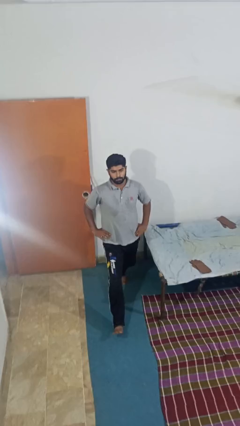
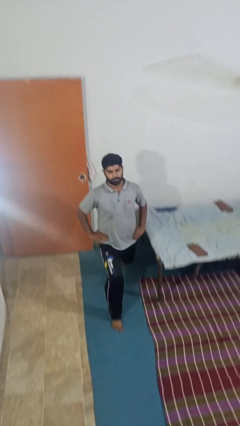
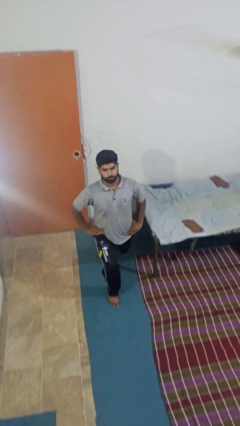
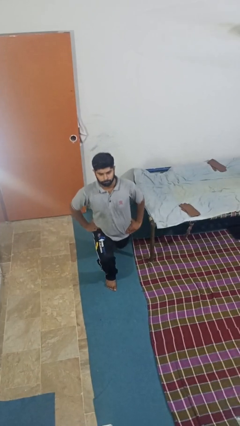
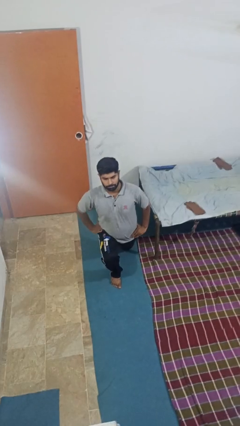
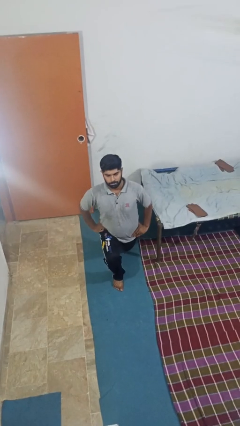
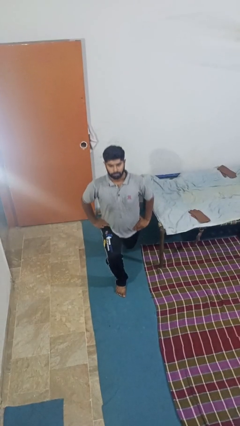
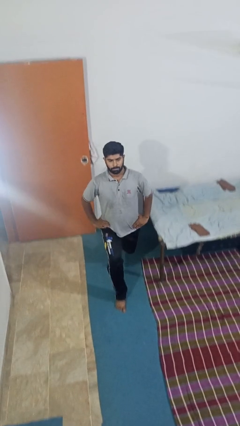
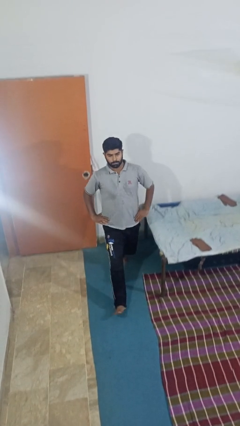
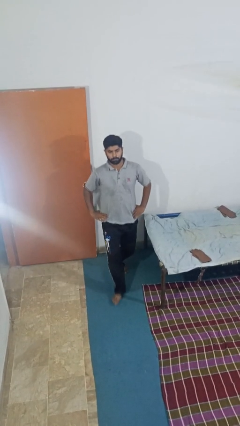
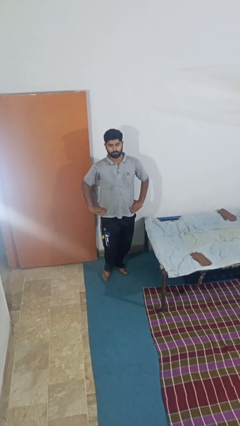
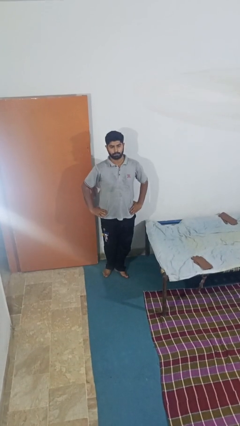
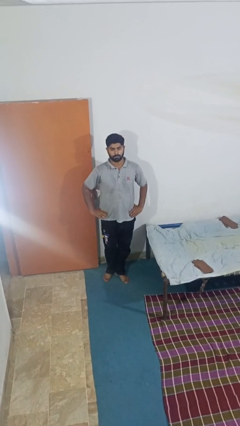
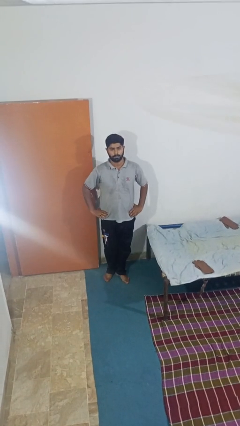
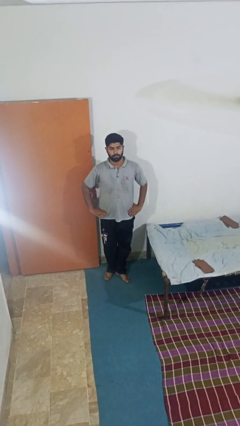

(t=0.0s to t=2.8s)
person exercises with lunges

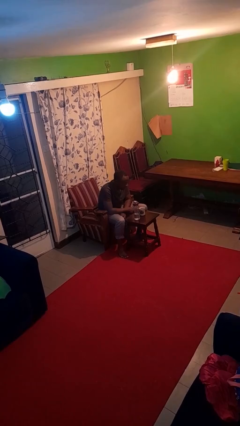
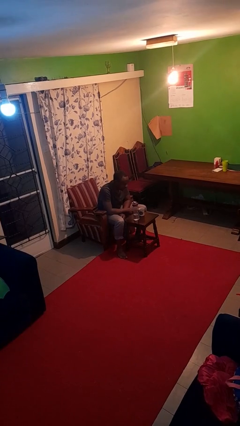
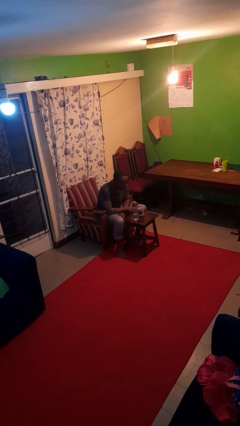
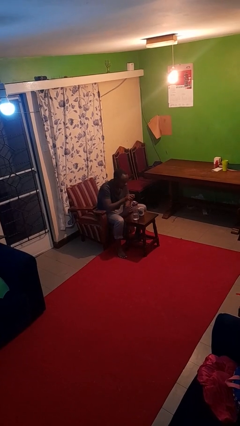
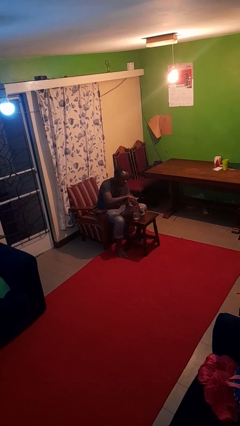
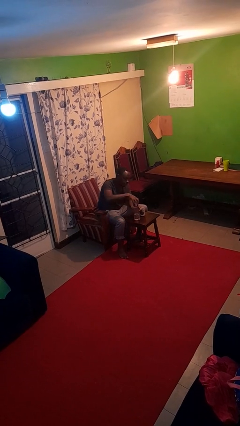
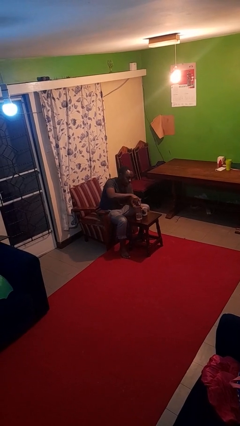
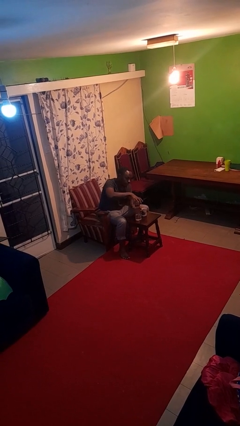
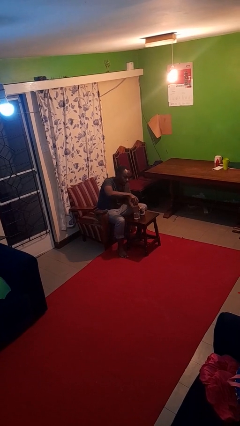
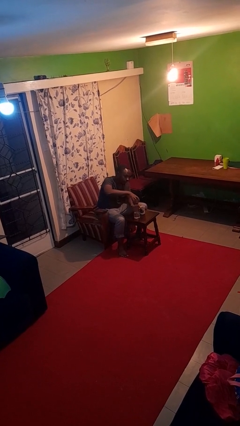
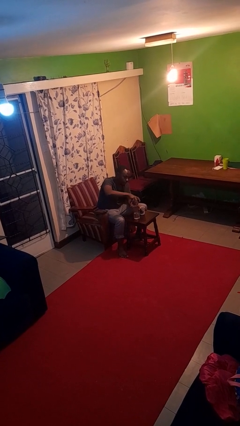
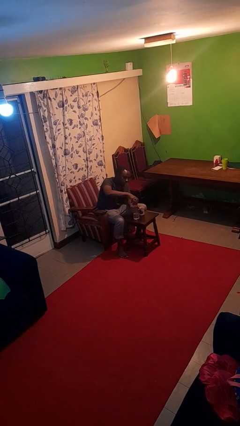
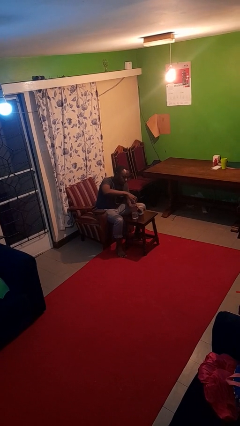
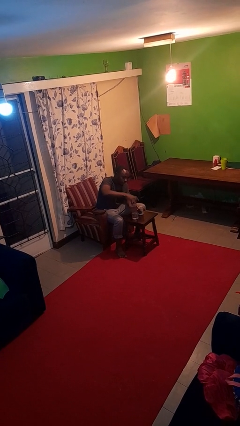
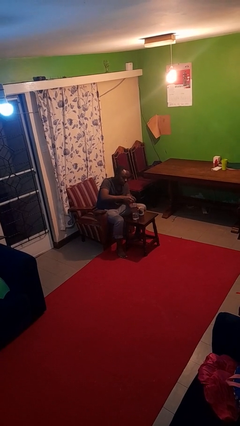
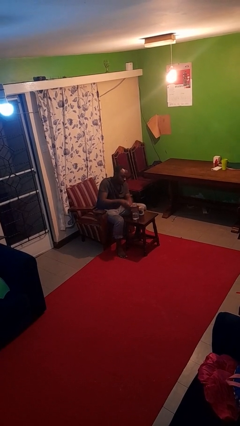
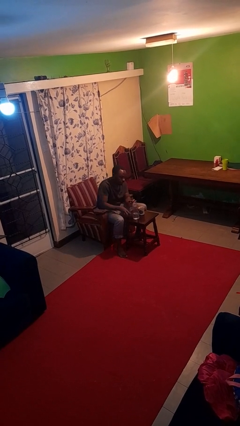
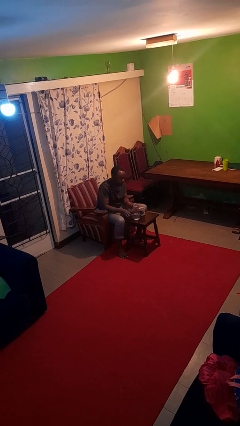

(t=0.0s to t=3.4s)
person unscrews lid from bottle

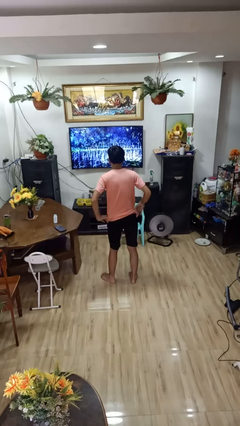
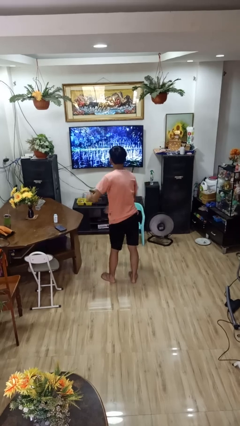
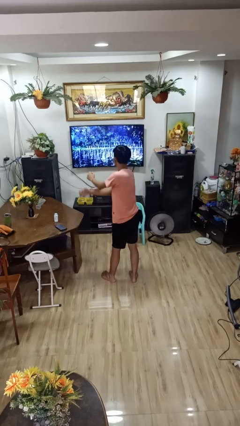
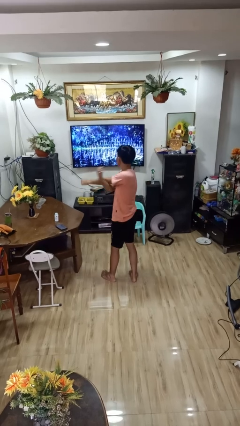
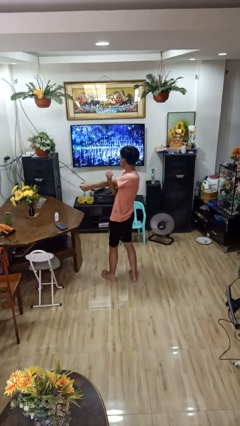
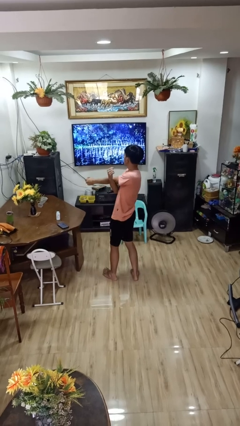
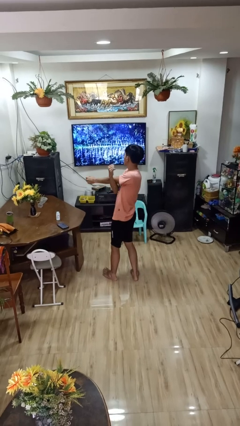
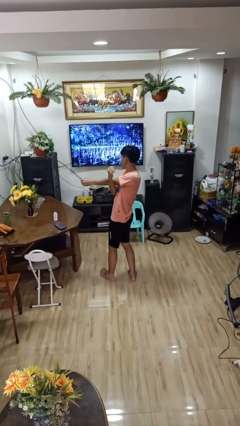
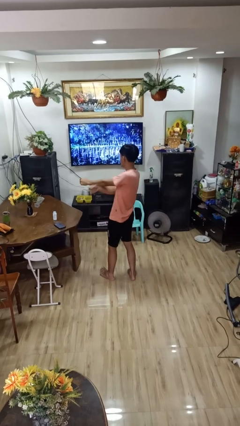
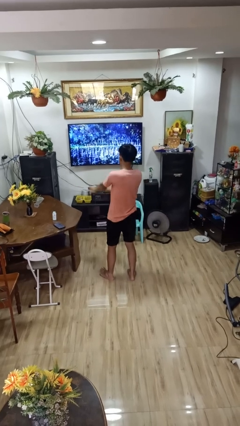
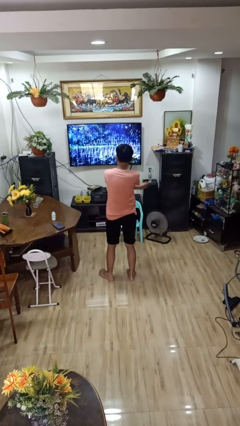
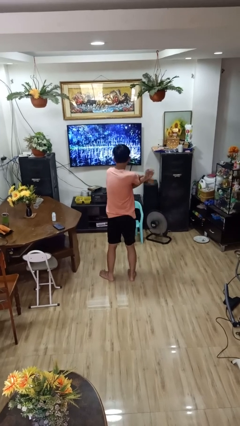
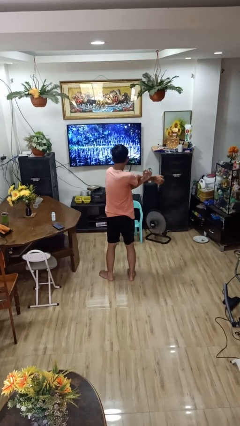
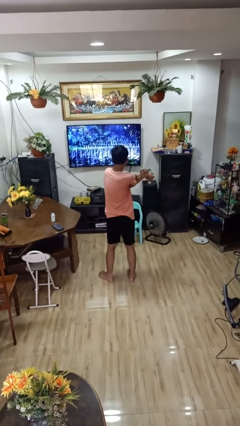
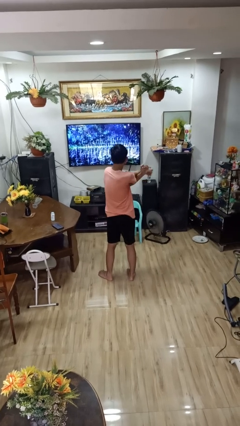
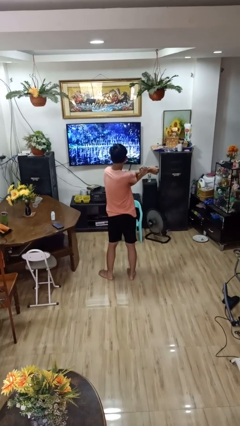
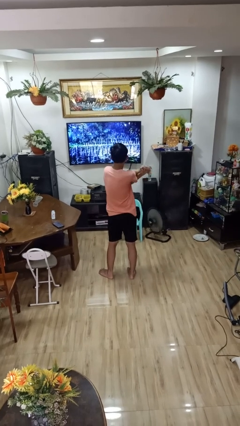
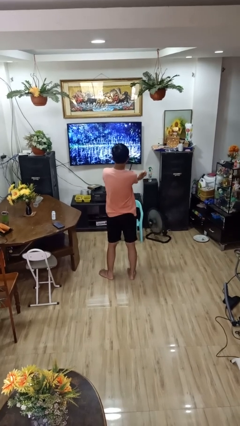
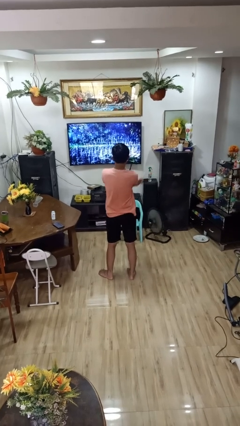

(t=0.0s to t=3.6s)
person stretches arms to side

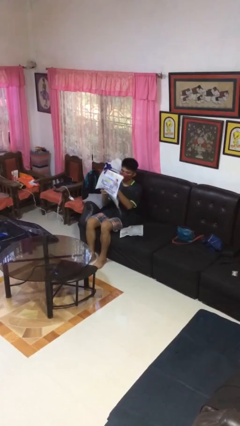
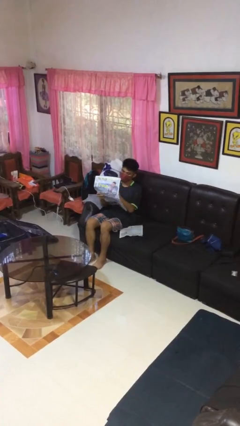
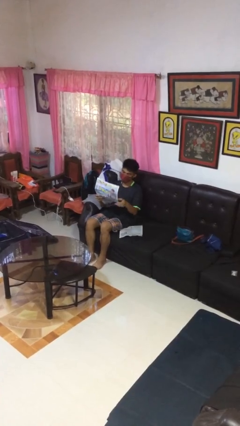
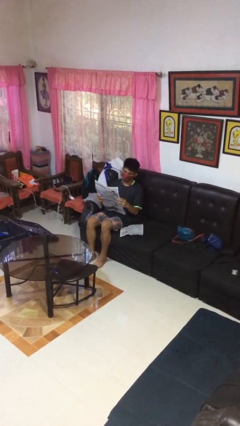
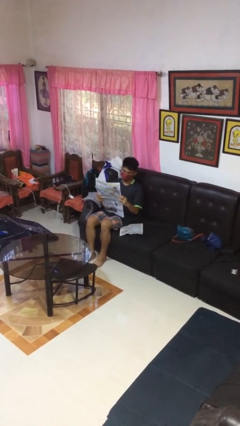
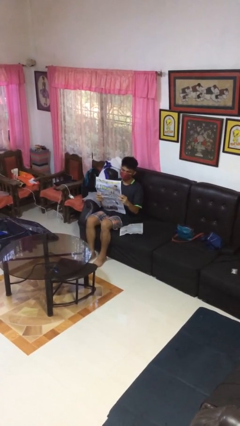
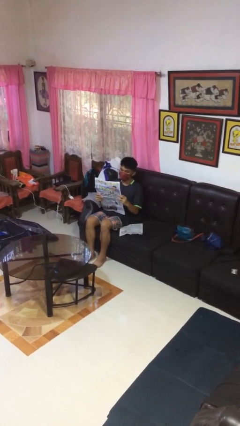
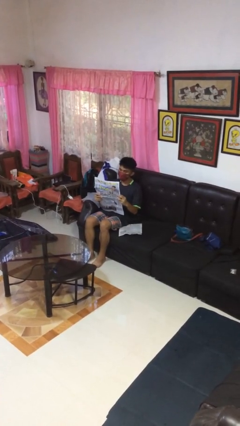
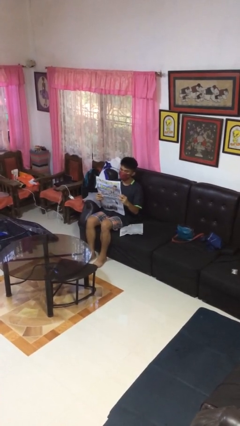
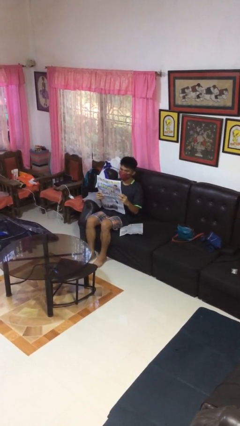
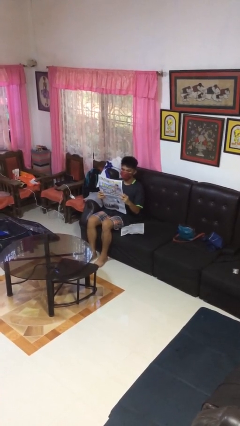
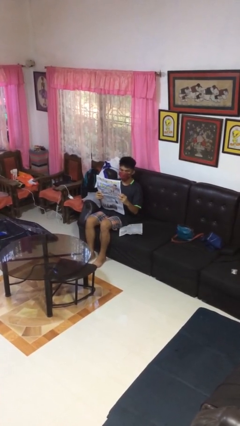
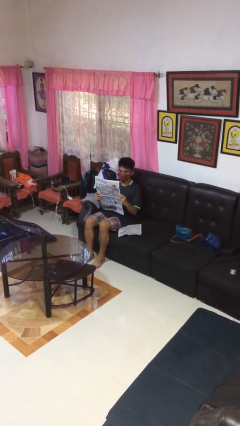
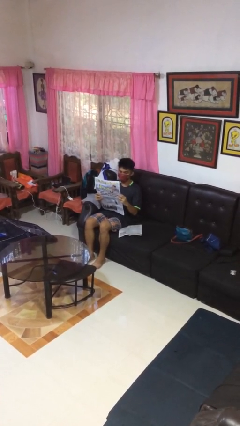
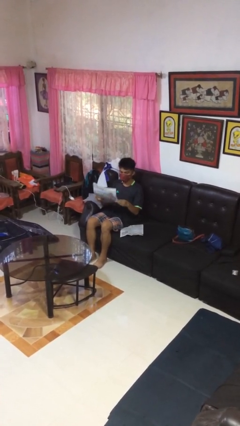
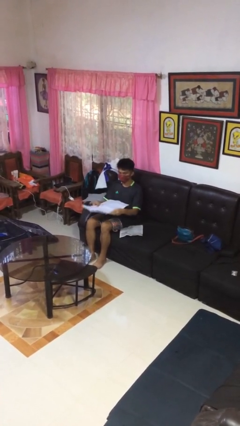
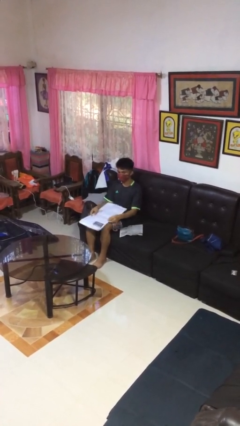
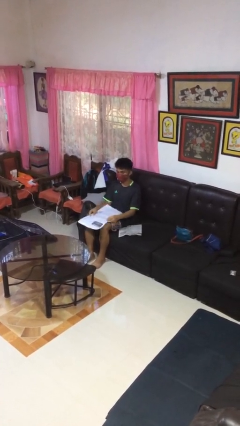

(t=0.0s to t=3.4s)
person reads newspaper

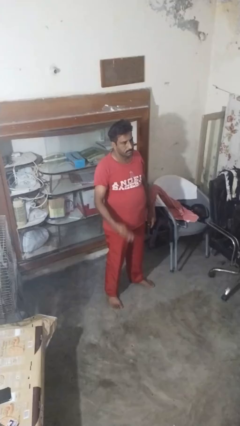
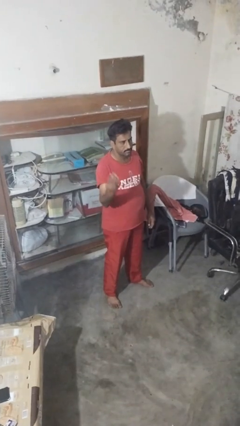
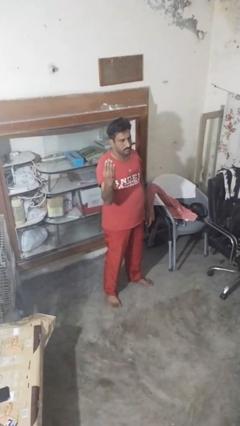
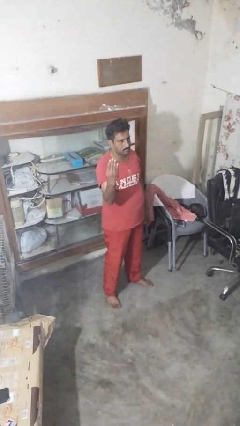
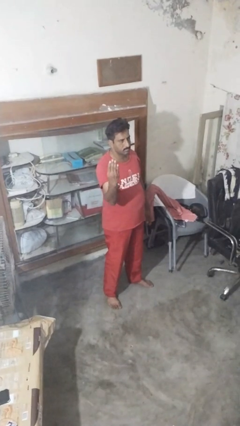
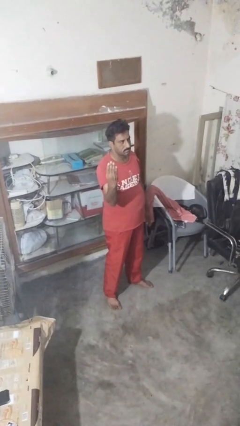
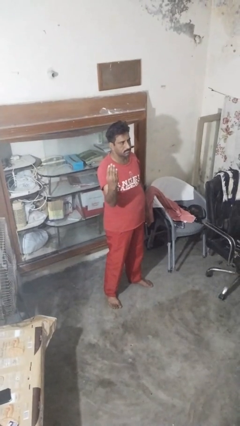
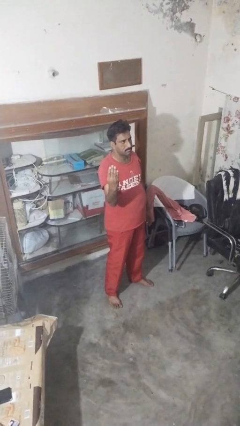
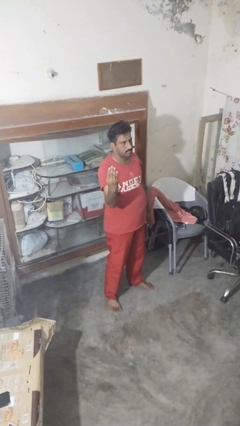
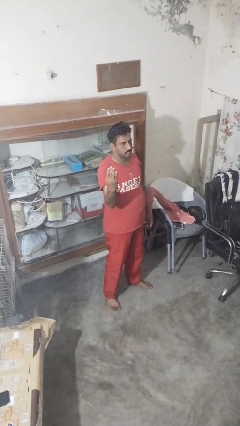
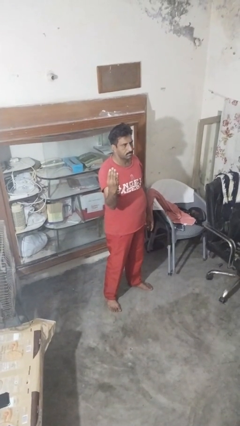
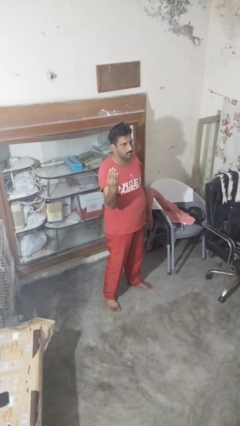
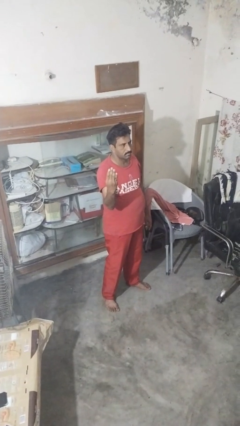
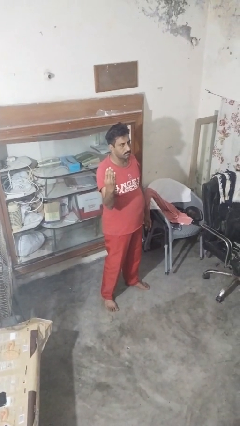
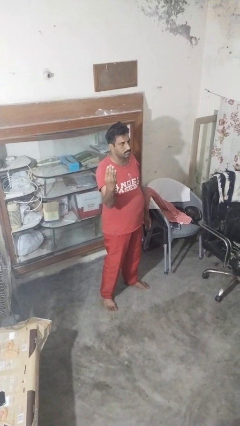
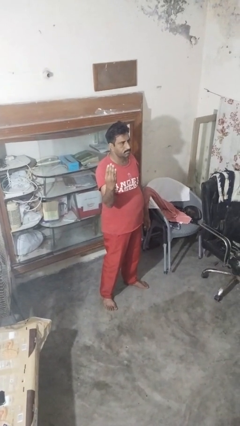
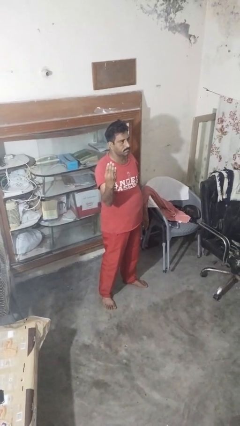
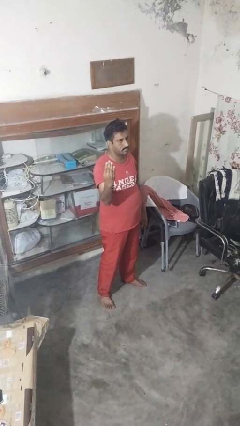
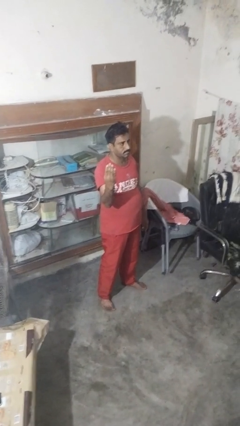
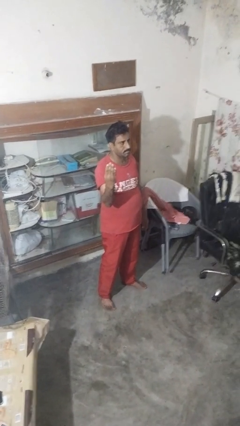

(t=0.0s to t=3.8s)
person gestures number four

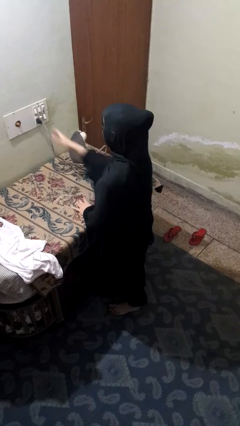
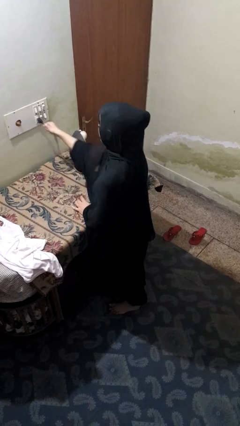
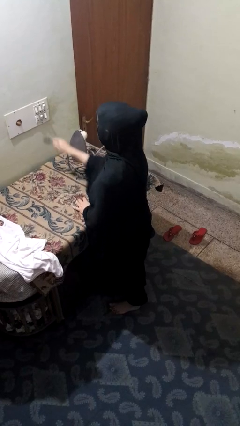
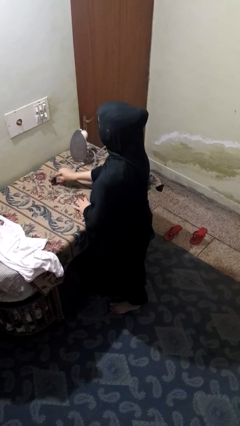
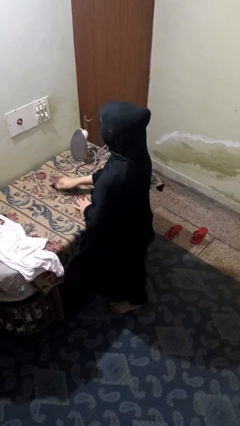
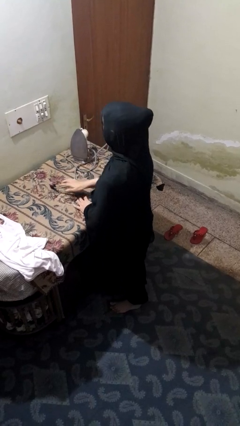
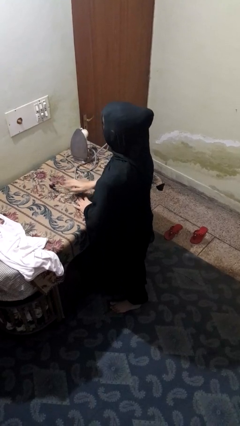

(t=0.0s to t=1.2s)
person unplugs from electrical socket
